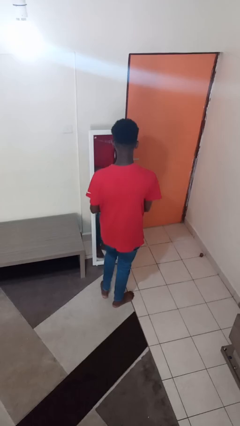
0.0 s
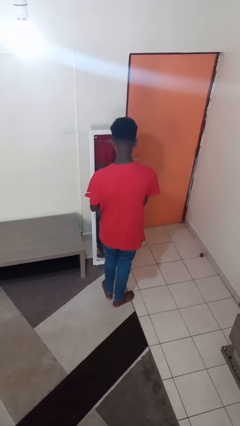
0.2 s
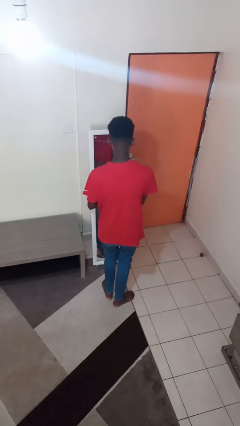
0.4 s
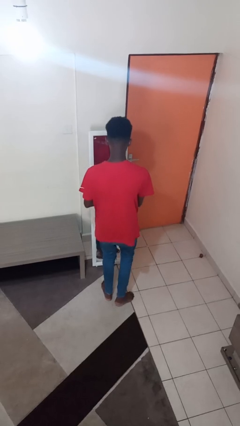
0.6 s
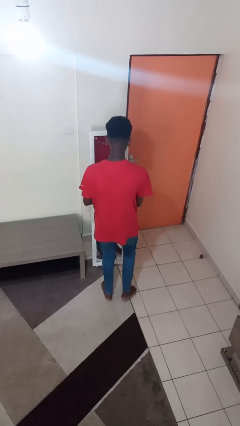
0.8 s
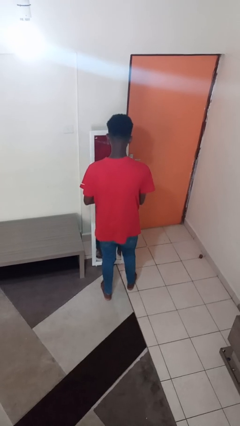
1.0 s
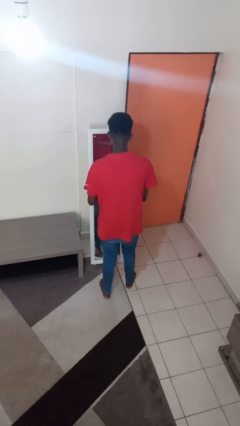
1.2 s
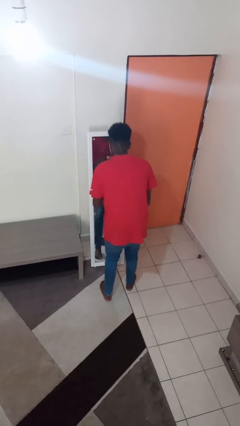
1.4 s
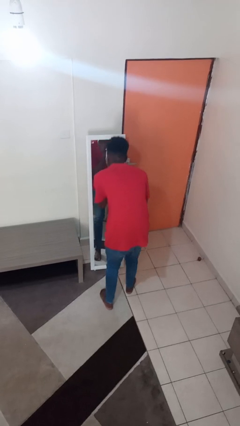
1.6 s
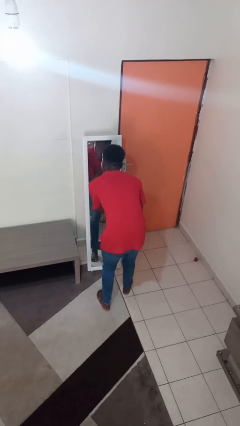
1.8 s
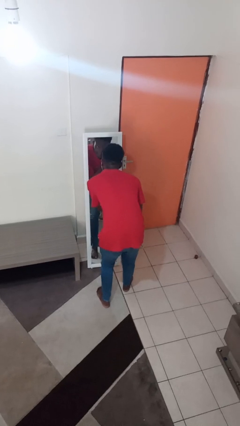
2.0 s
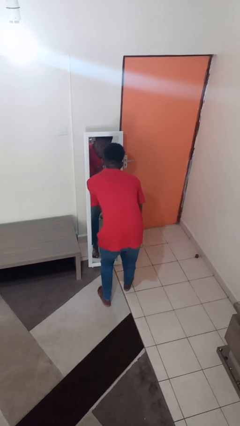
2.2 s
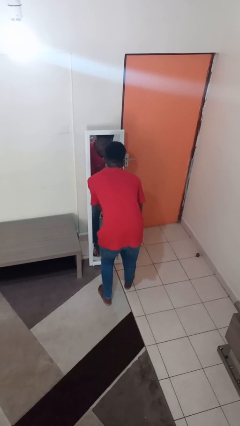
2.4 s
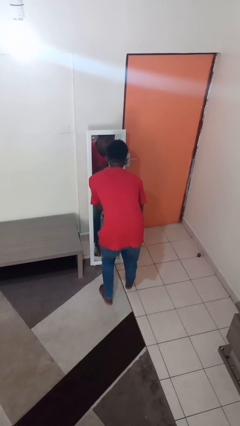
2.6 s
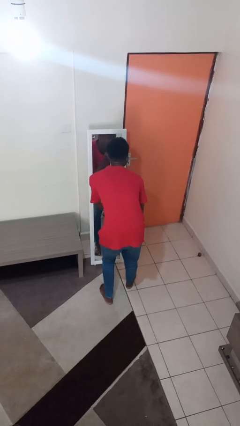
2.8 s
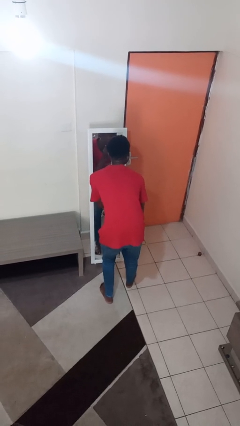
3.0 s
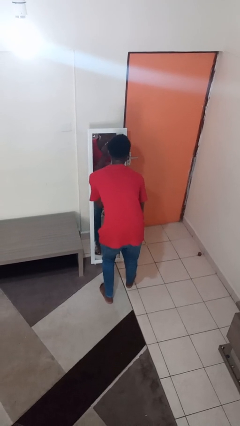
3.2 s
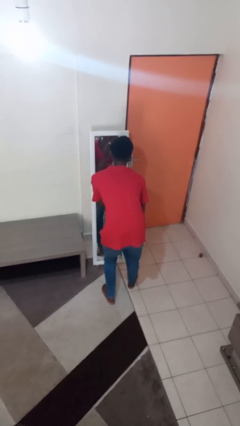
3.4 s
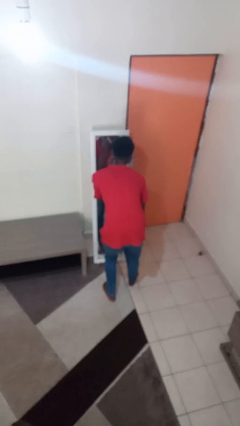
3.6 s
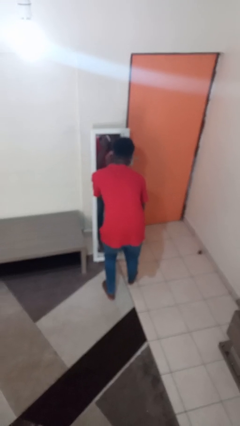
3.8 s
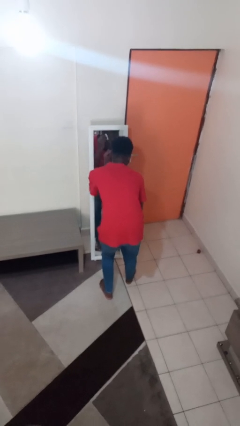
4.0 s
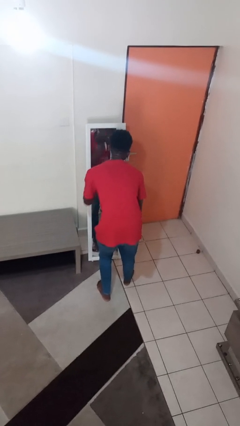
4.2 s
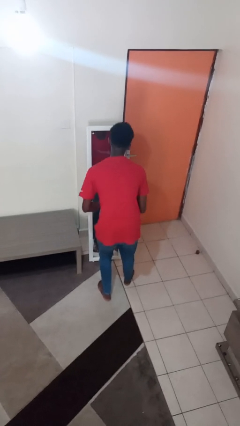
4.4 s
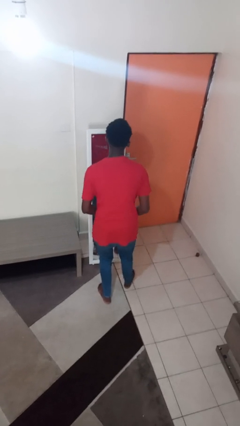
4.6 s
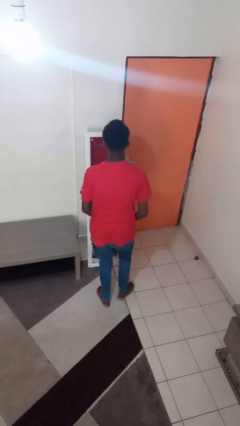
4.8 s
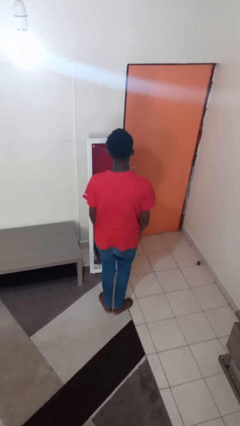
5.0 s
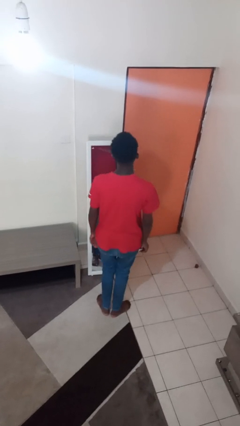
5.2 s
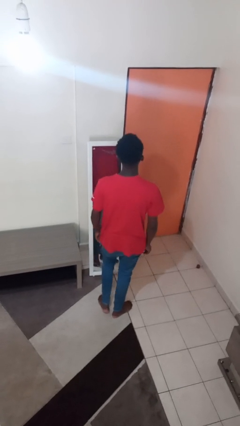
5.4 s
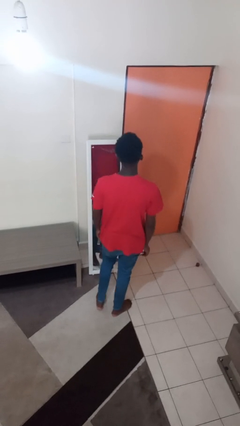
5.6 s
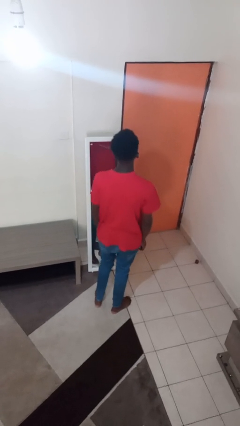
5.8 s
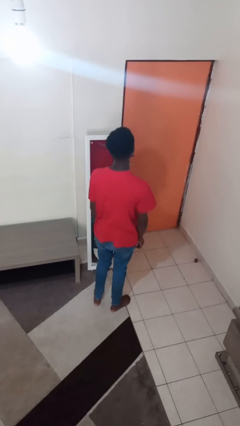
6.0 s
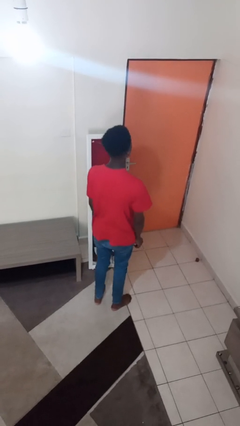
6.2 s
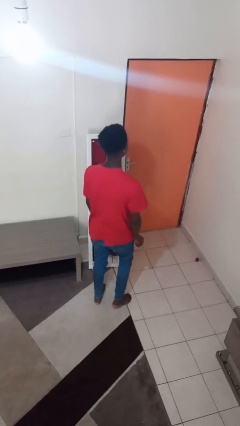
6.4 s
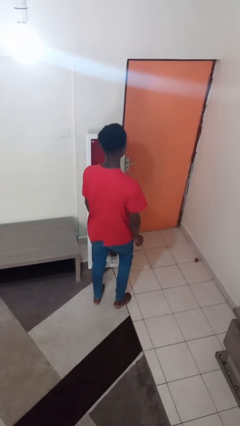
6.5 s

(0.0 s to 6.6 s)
person applies foundation makeup

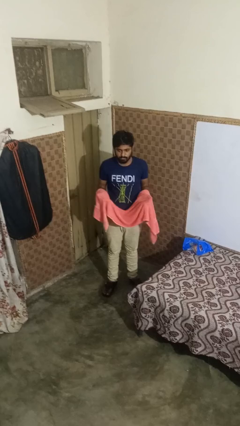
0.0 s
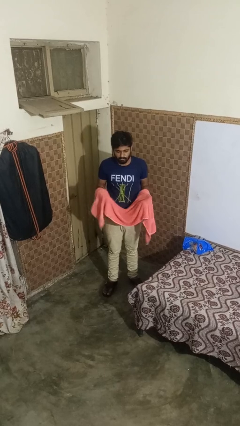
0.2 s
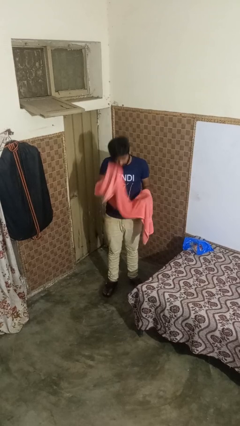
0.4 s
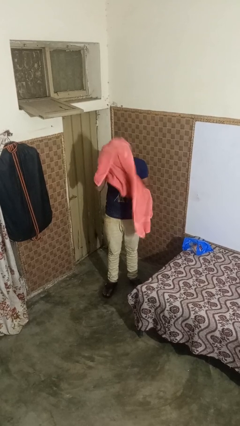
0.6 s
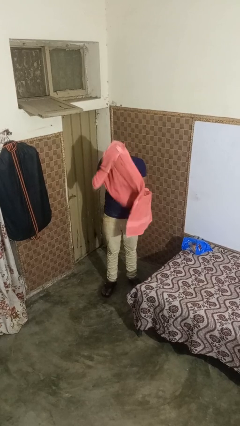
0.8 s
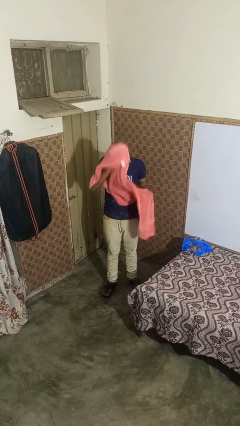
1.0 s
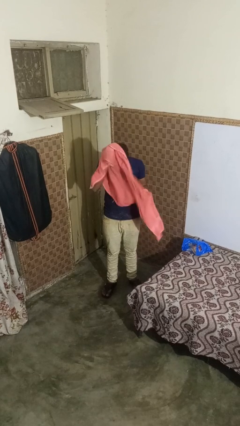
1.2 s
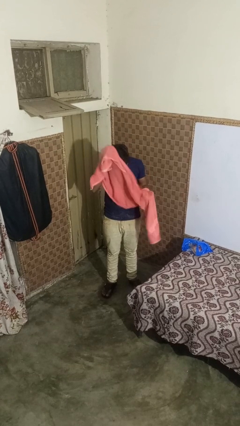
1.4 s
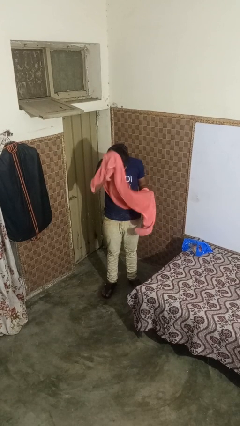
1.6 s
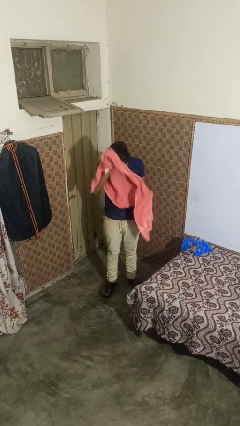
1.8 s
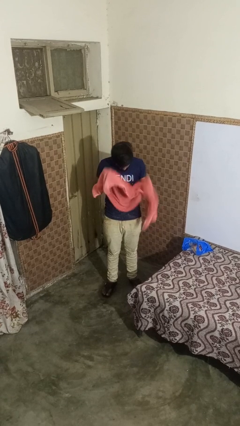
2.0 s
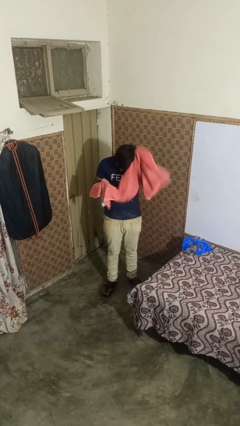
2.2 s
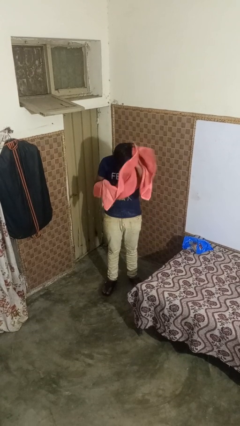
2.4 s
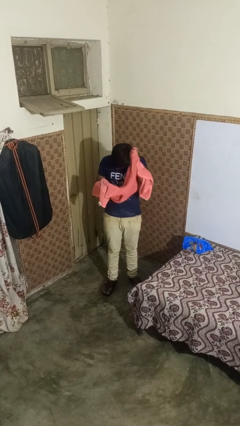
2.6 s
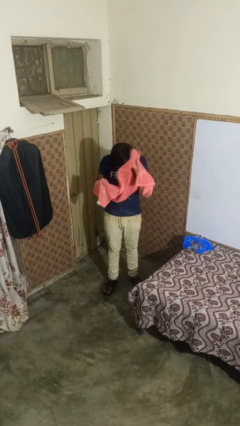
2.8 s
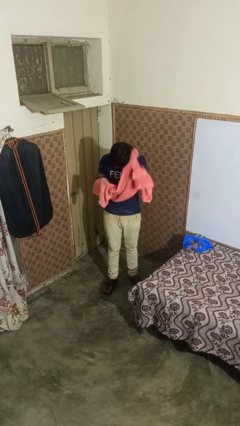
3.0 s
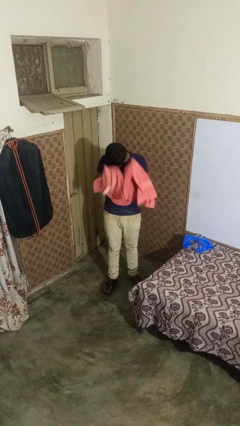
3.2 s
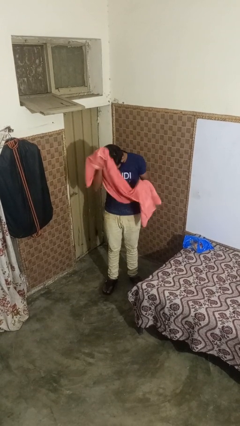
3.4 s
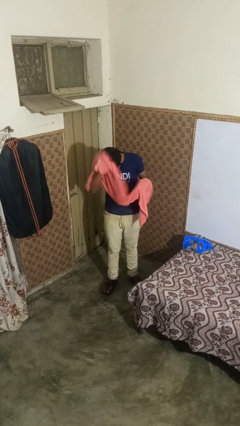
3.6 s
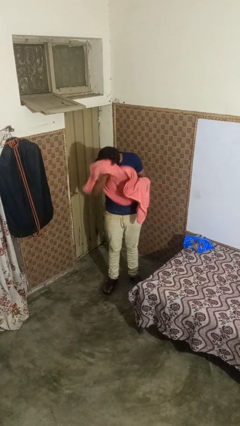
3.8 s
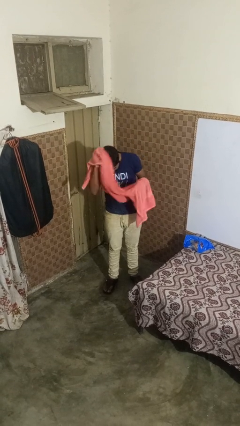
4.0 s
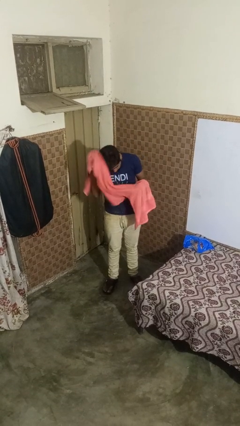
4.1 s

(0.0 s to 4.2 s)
person dries hair with towel

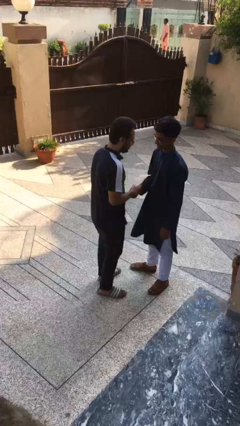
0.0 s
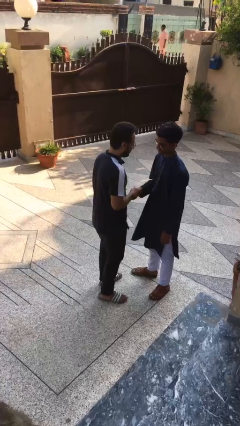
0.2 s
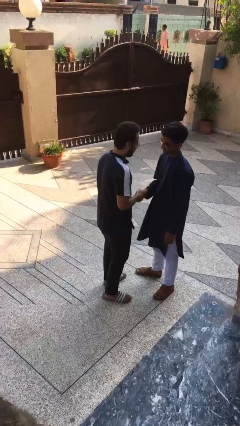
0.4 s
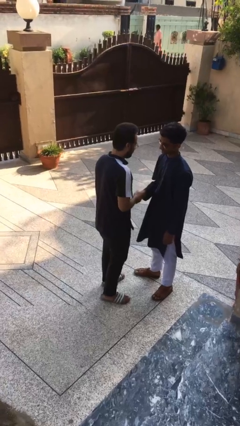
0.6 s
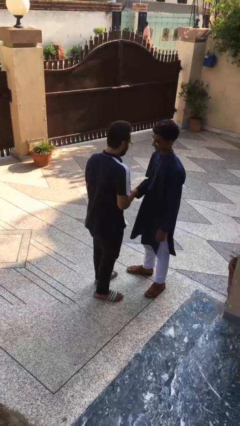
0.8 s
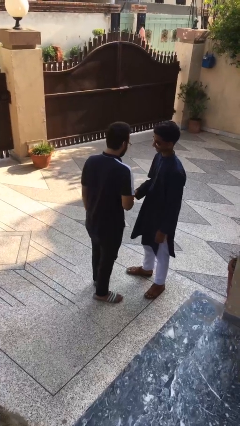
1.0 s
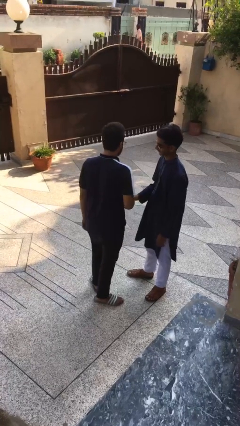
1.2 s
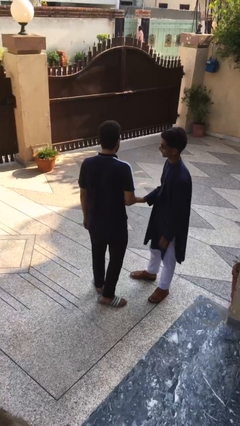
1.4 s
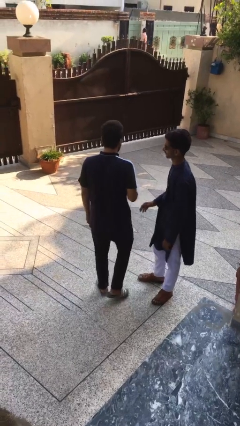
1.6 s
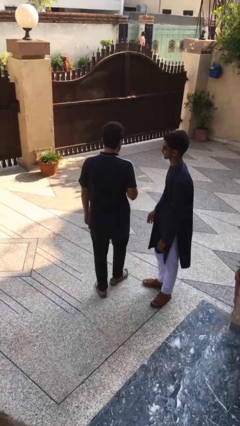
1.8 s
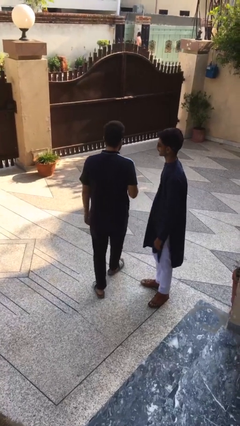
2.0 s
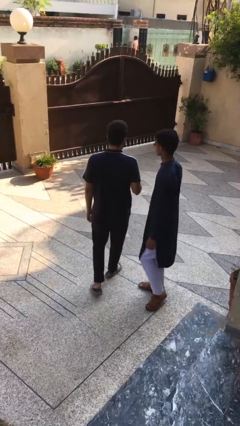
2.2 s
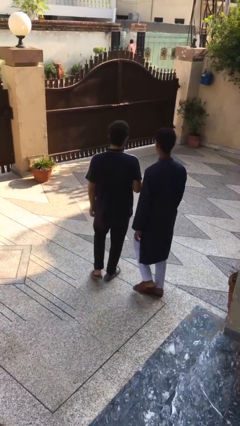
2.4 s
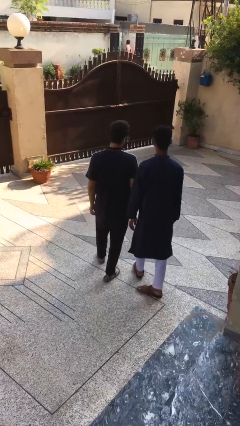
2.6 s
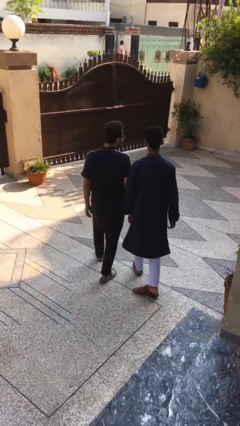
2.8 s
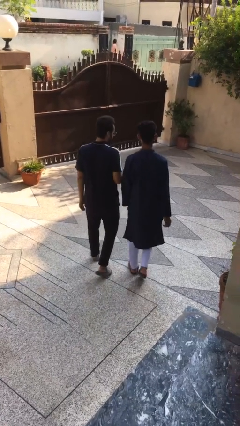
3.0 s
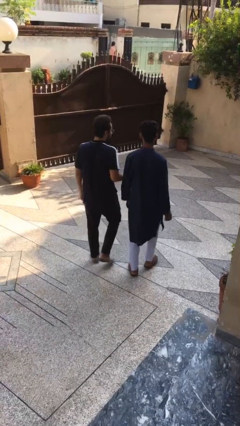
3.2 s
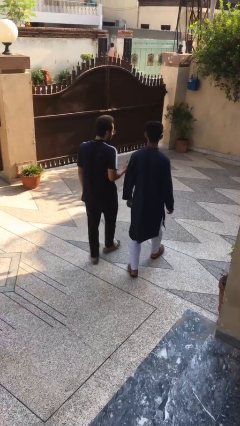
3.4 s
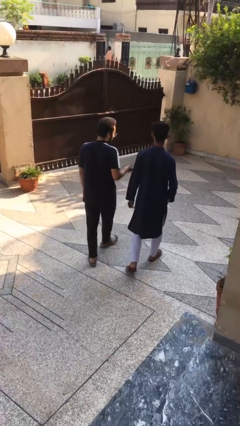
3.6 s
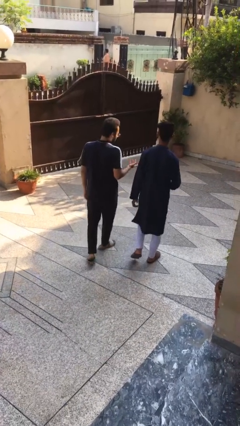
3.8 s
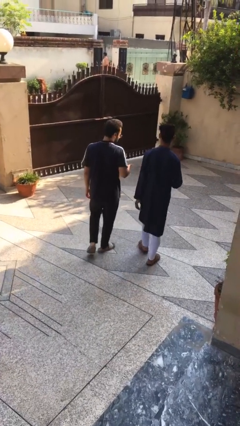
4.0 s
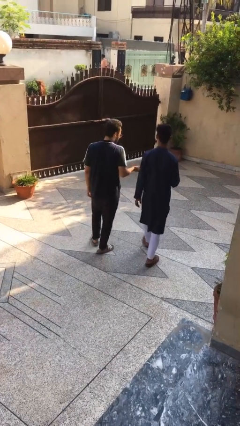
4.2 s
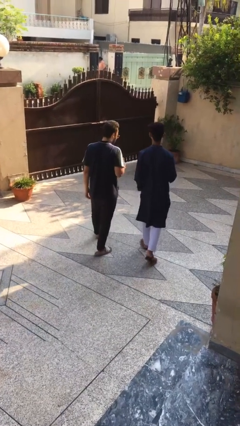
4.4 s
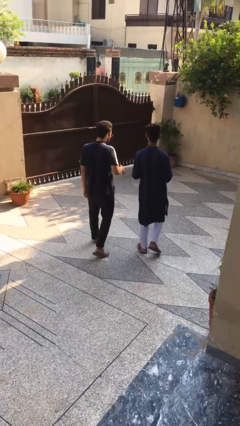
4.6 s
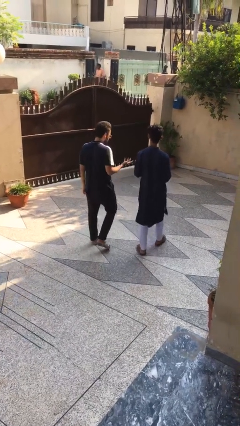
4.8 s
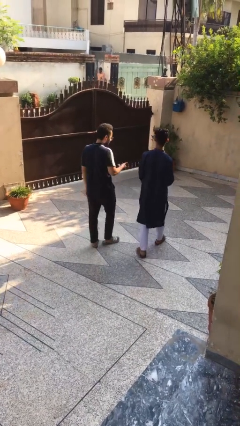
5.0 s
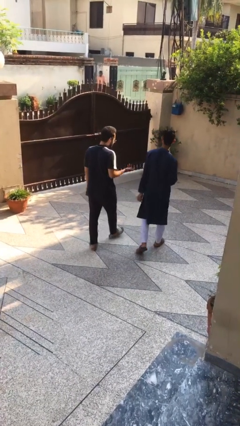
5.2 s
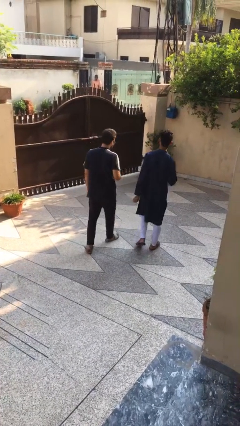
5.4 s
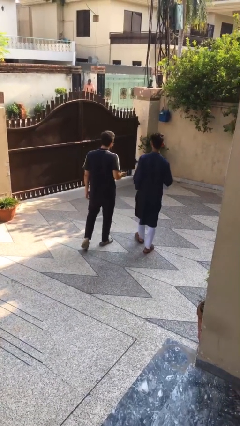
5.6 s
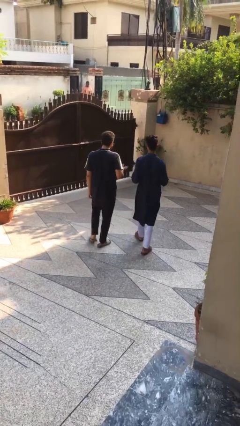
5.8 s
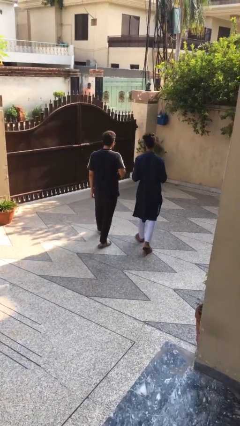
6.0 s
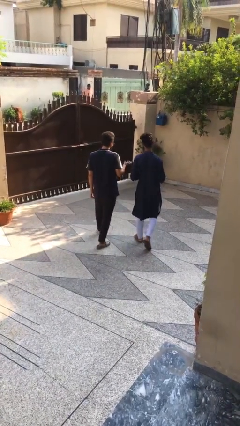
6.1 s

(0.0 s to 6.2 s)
person talks to person

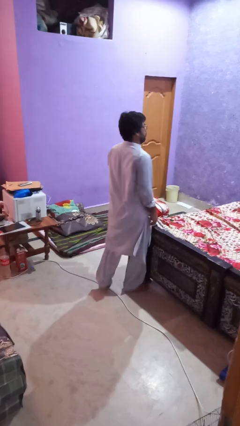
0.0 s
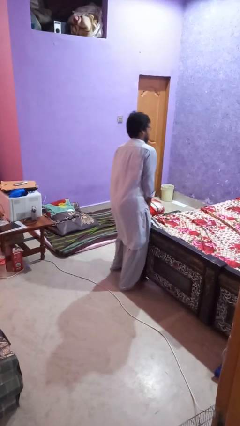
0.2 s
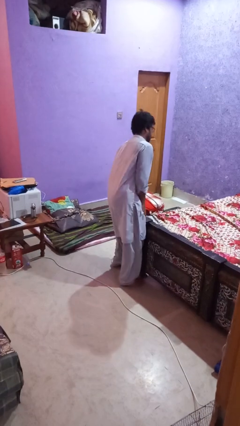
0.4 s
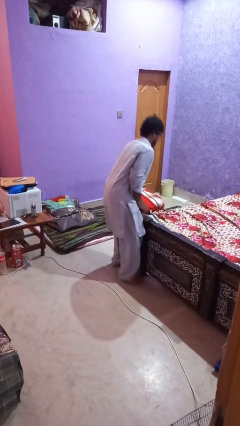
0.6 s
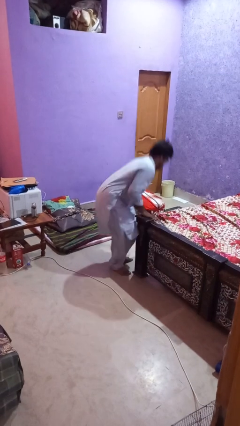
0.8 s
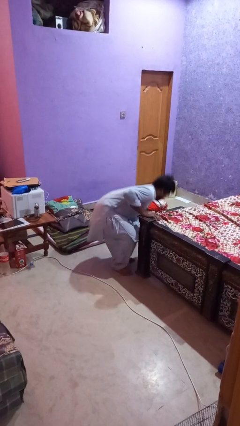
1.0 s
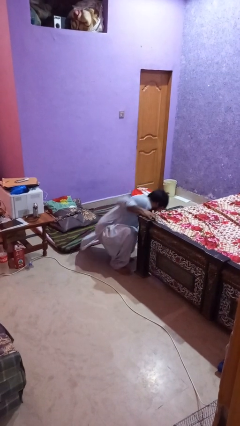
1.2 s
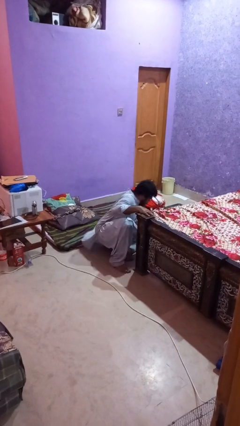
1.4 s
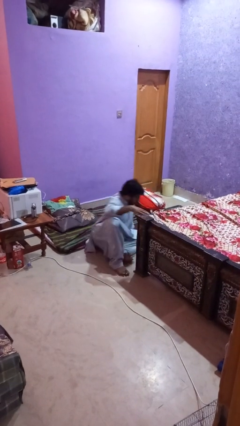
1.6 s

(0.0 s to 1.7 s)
person trips on object on floor
